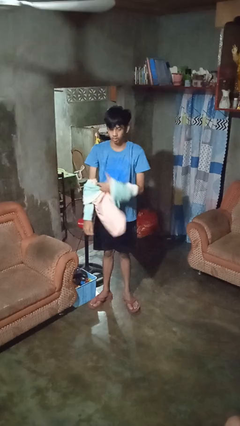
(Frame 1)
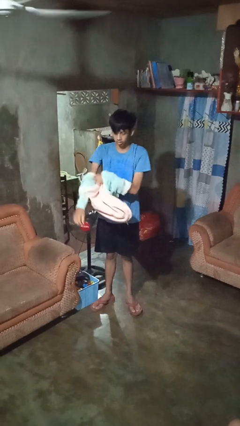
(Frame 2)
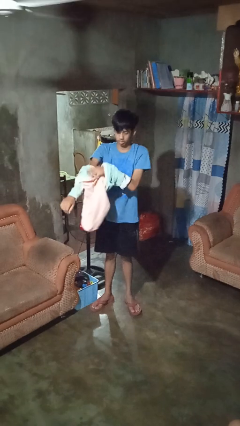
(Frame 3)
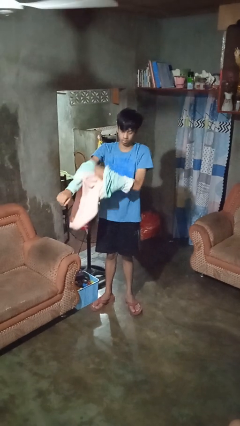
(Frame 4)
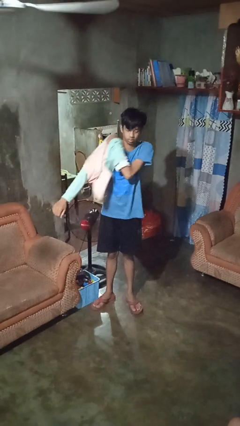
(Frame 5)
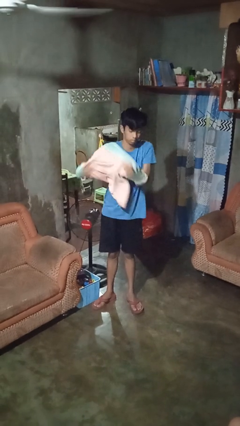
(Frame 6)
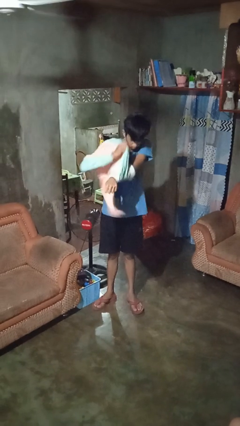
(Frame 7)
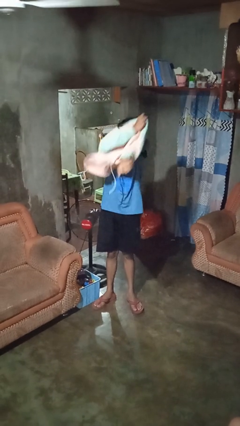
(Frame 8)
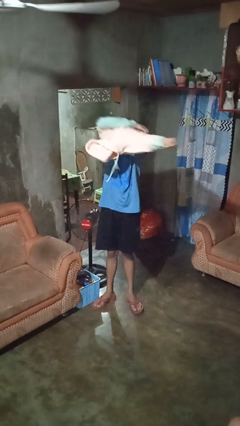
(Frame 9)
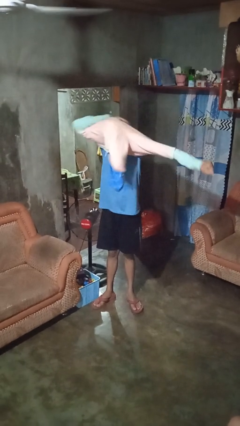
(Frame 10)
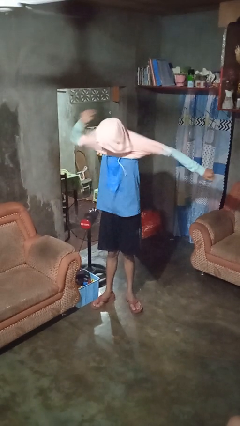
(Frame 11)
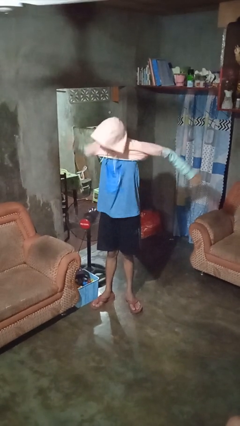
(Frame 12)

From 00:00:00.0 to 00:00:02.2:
person puts on hoodie

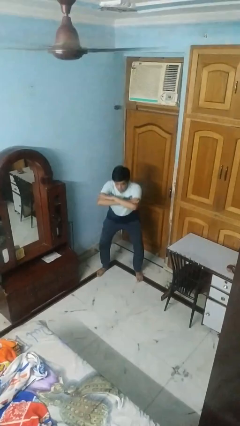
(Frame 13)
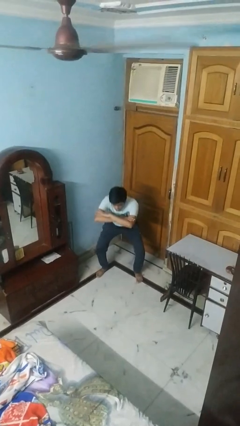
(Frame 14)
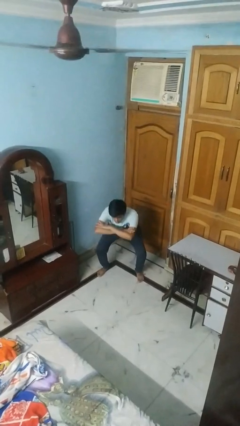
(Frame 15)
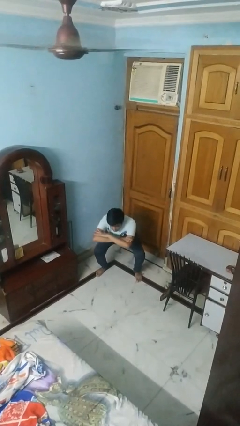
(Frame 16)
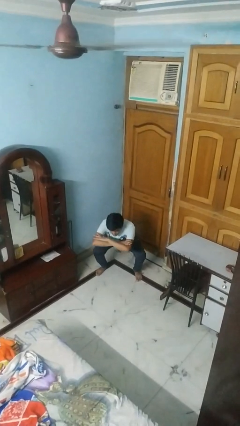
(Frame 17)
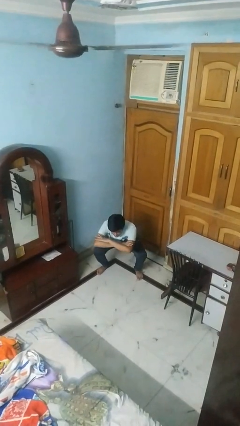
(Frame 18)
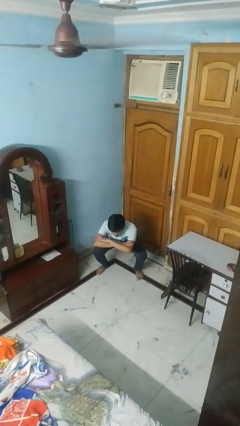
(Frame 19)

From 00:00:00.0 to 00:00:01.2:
person squats

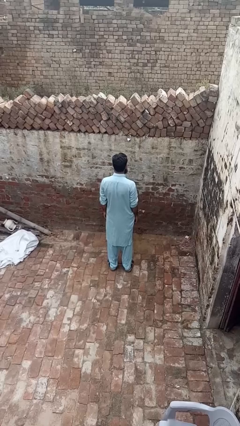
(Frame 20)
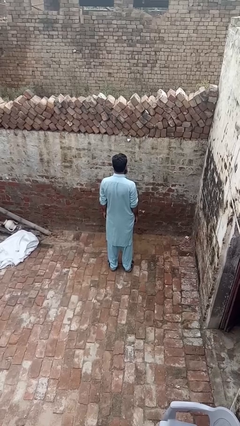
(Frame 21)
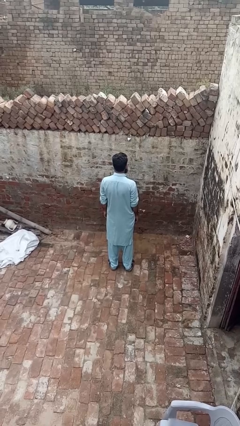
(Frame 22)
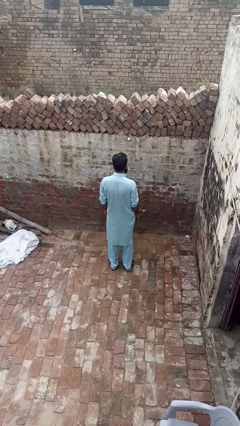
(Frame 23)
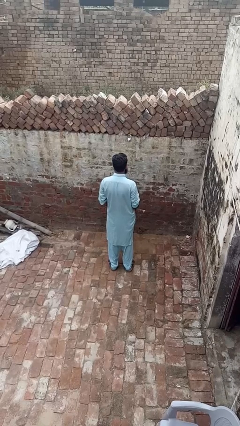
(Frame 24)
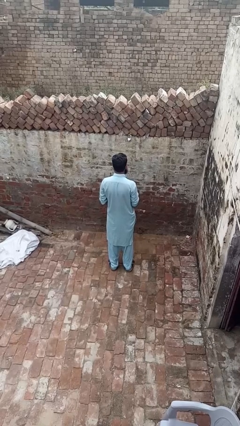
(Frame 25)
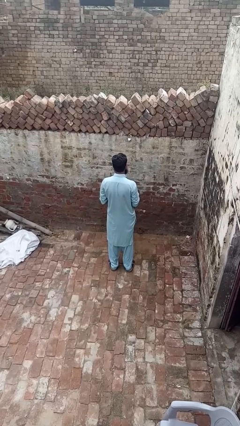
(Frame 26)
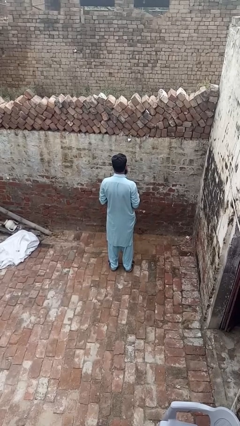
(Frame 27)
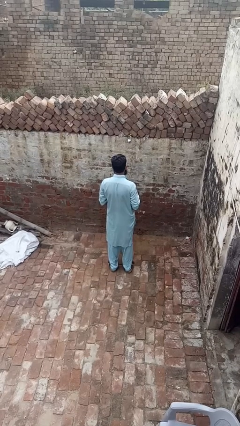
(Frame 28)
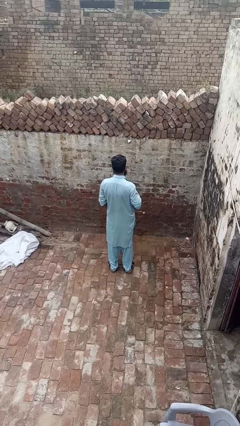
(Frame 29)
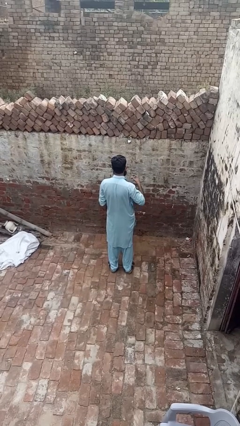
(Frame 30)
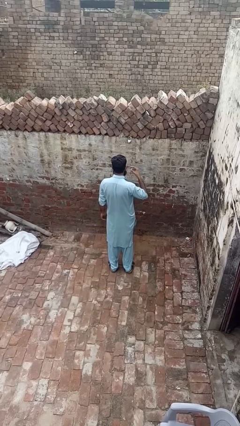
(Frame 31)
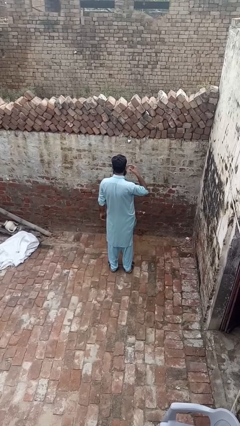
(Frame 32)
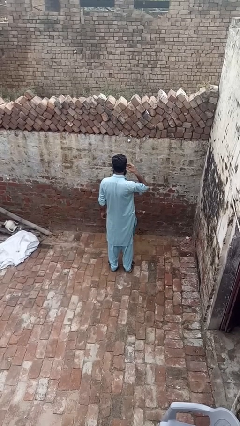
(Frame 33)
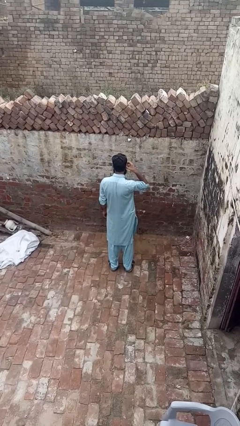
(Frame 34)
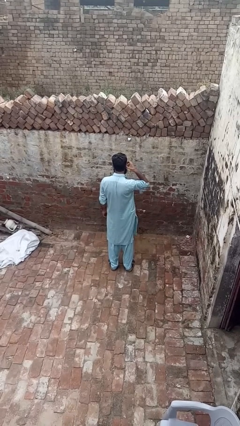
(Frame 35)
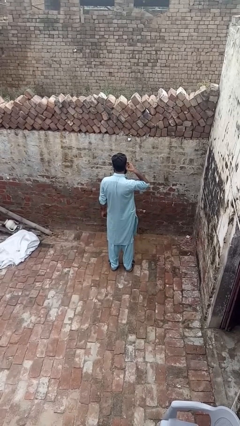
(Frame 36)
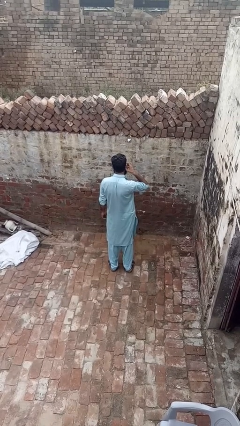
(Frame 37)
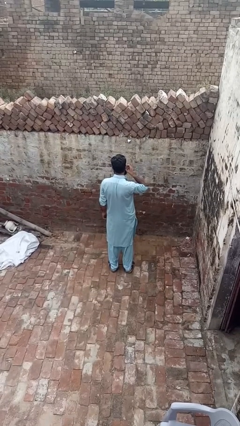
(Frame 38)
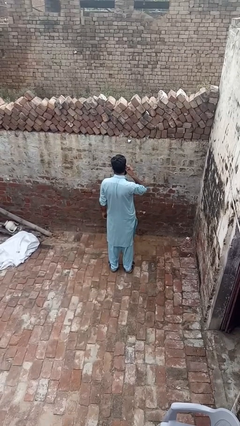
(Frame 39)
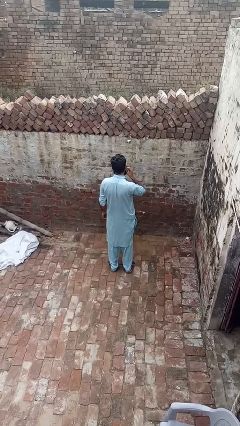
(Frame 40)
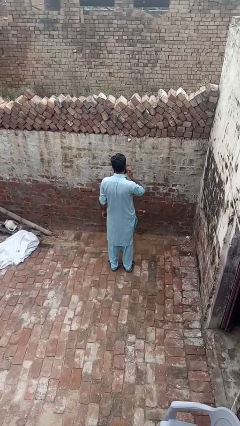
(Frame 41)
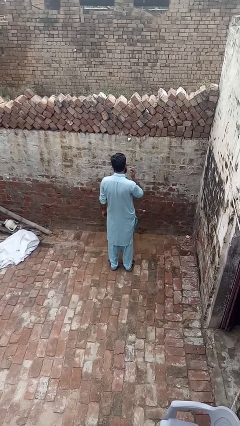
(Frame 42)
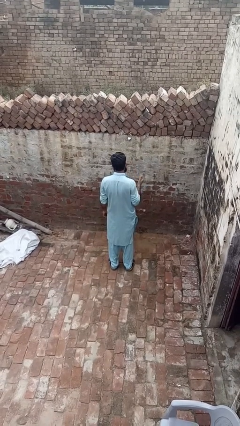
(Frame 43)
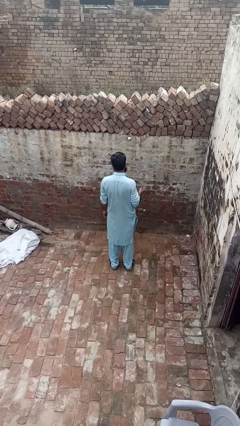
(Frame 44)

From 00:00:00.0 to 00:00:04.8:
person puts on earrings

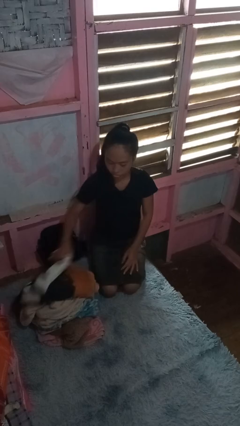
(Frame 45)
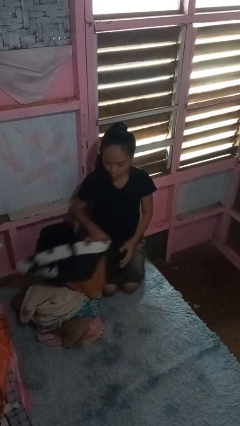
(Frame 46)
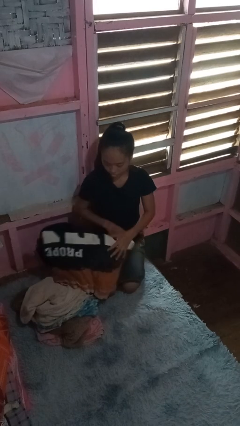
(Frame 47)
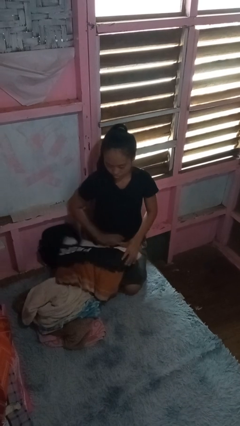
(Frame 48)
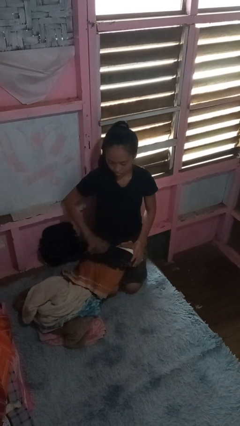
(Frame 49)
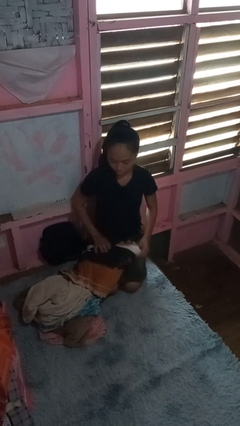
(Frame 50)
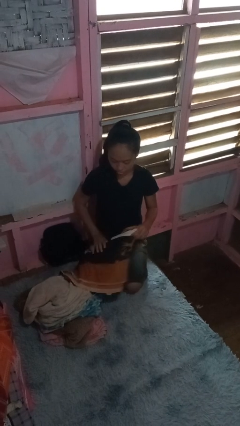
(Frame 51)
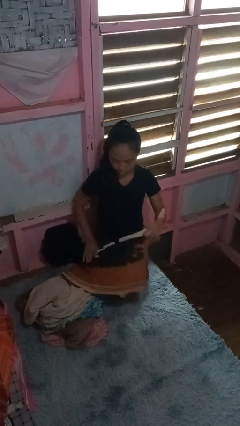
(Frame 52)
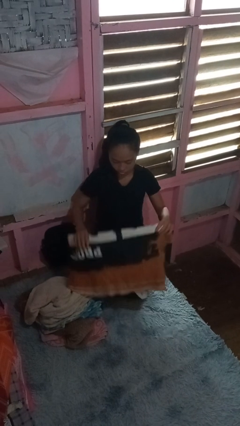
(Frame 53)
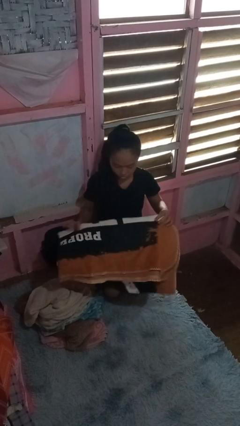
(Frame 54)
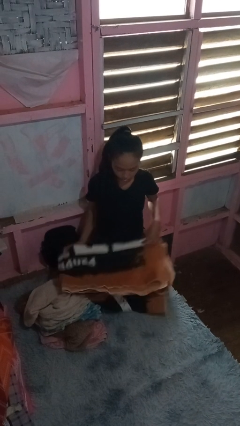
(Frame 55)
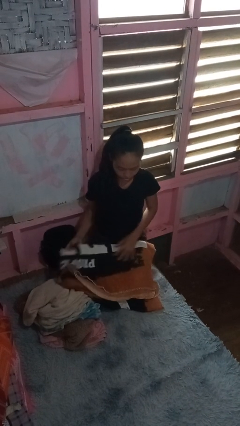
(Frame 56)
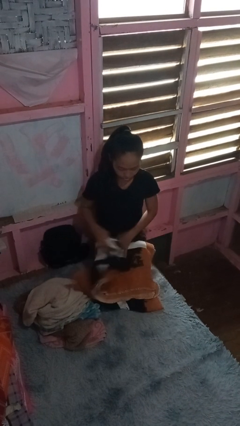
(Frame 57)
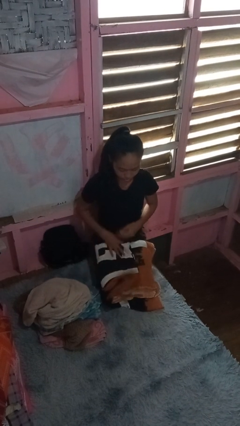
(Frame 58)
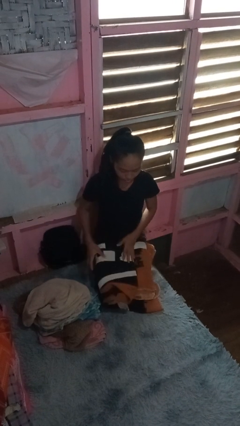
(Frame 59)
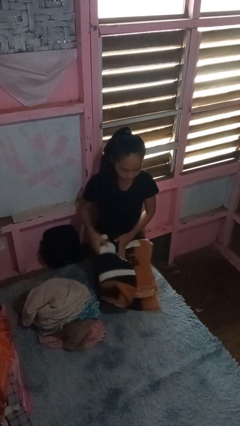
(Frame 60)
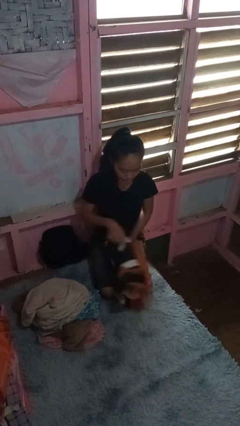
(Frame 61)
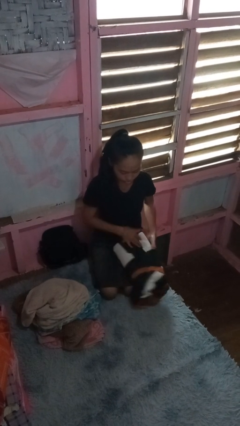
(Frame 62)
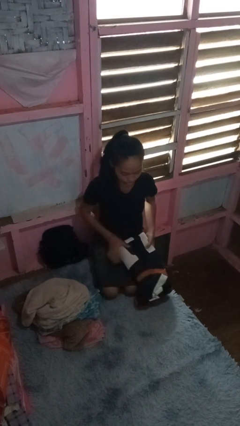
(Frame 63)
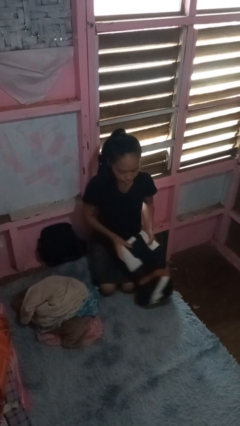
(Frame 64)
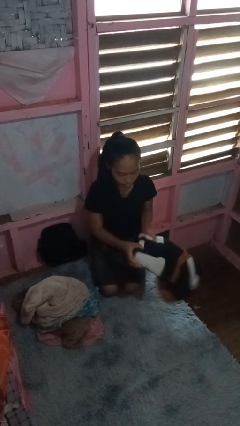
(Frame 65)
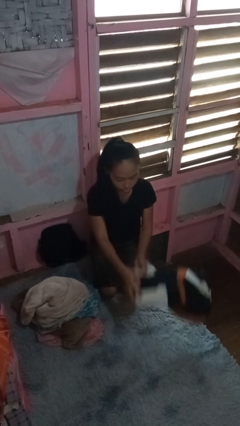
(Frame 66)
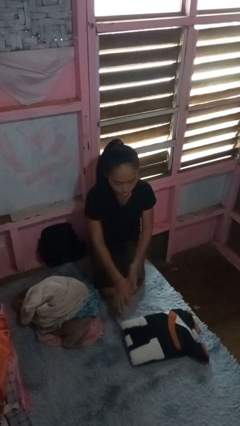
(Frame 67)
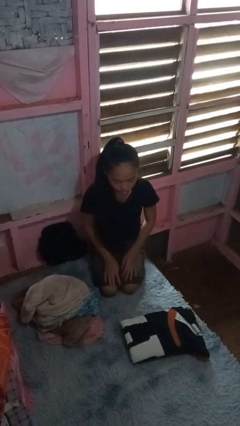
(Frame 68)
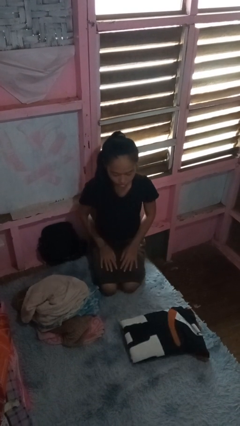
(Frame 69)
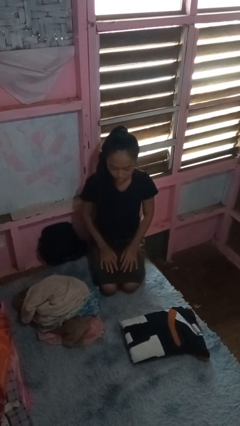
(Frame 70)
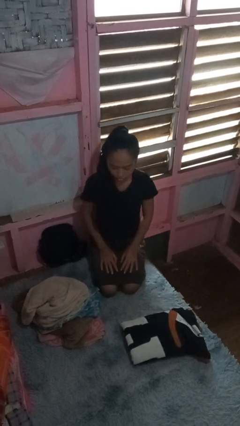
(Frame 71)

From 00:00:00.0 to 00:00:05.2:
person folds towel

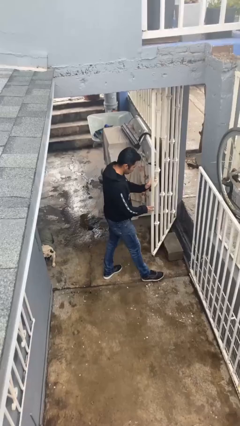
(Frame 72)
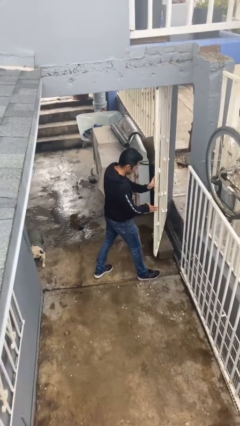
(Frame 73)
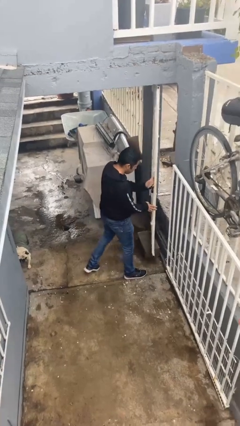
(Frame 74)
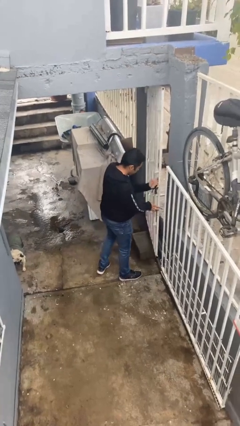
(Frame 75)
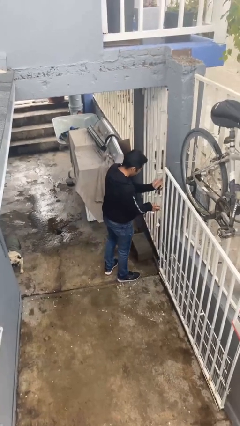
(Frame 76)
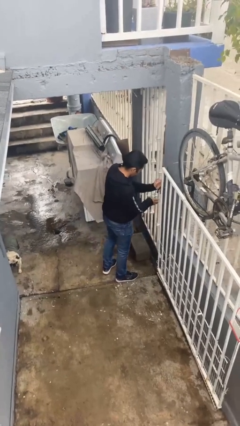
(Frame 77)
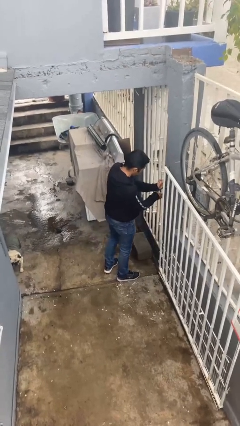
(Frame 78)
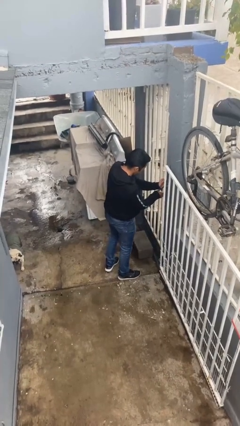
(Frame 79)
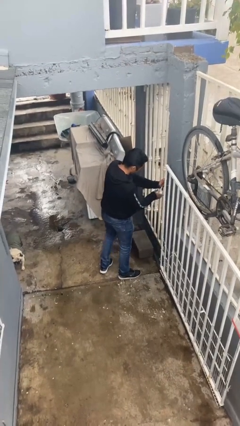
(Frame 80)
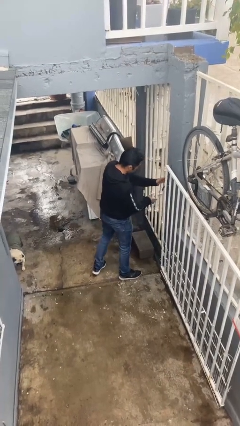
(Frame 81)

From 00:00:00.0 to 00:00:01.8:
person closes facility door

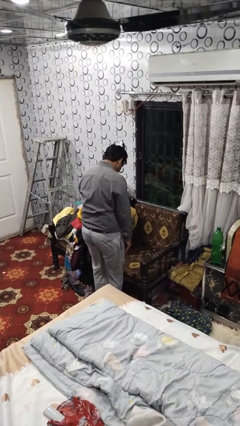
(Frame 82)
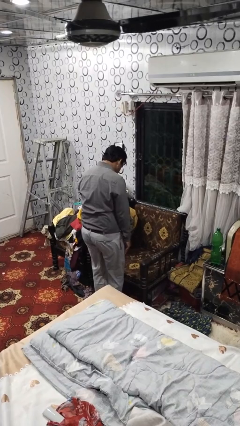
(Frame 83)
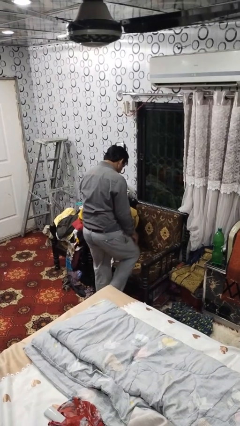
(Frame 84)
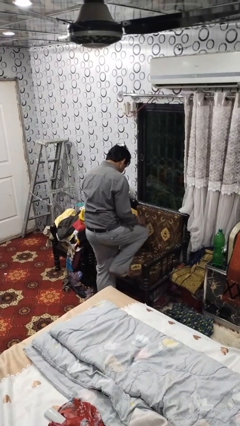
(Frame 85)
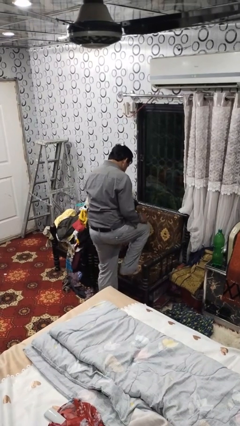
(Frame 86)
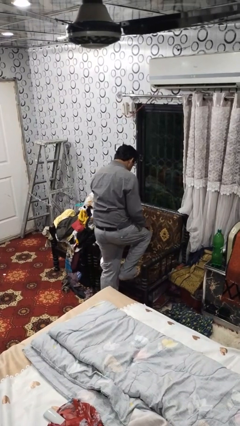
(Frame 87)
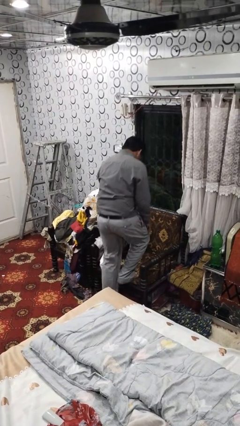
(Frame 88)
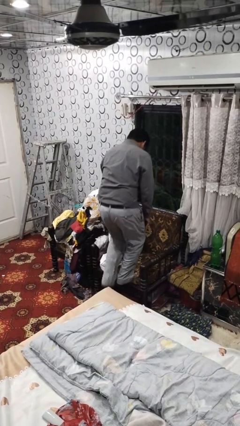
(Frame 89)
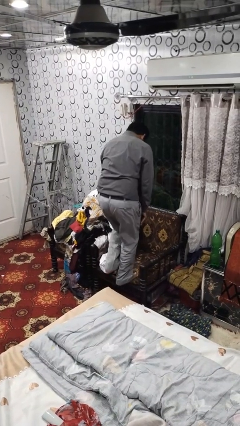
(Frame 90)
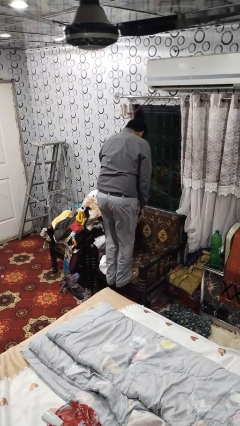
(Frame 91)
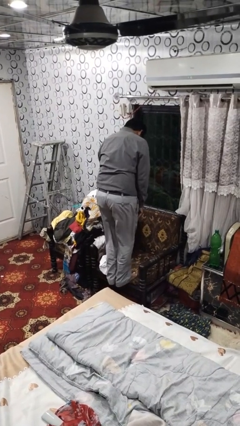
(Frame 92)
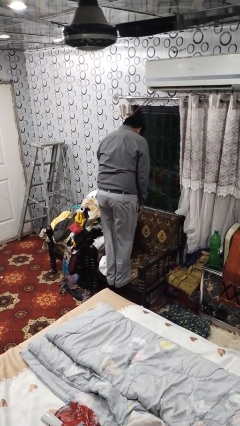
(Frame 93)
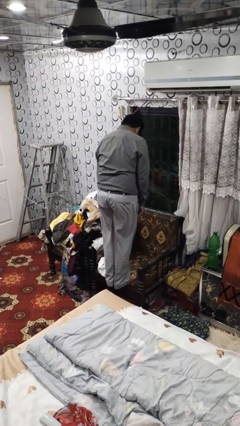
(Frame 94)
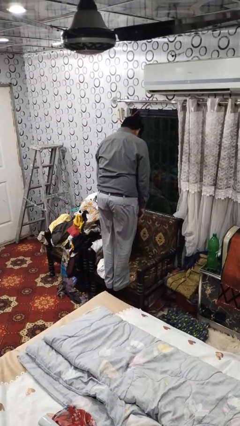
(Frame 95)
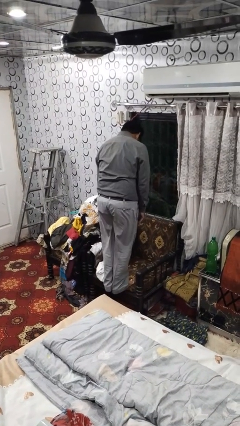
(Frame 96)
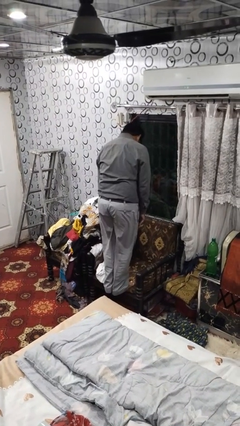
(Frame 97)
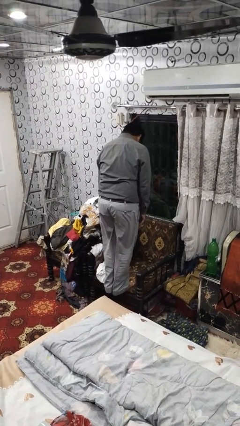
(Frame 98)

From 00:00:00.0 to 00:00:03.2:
person climbs on couch
